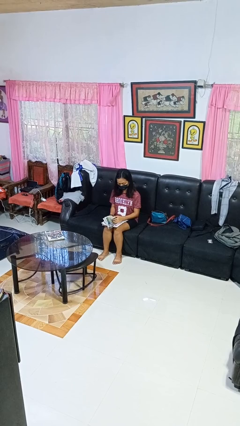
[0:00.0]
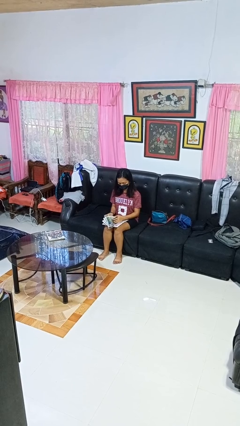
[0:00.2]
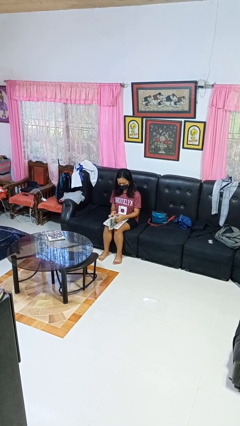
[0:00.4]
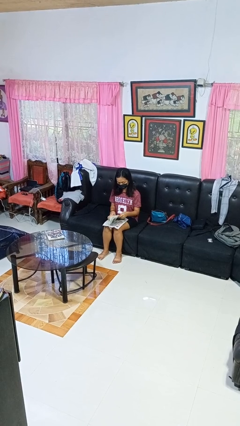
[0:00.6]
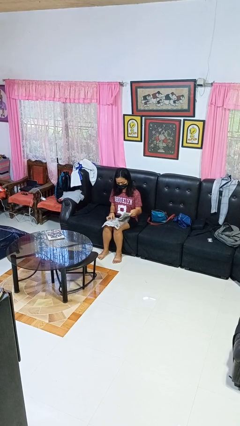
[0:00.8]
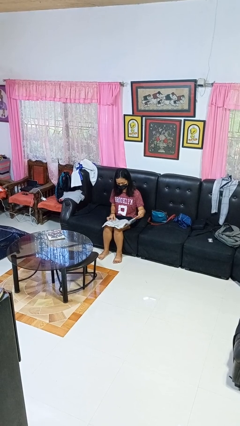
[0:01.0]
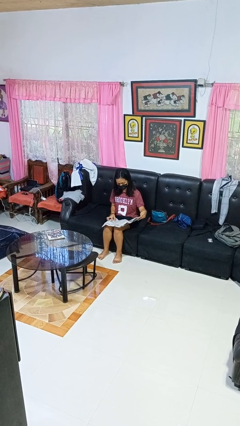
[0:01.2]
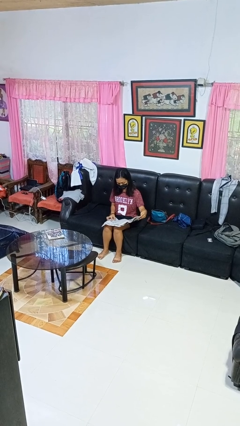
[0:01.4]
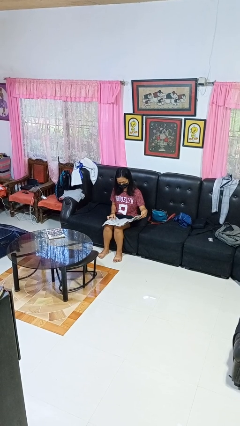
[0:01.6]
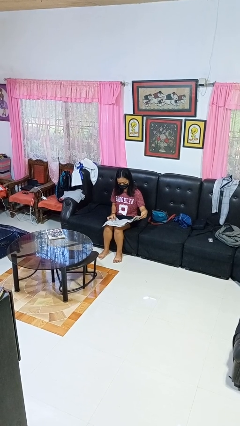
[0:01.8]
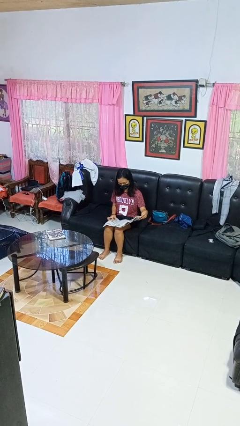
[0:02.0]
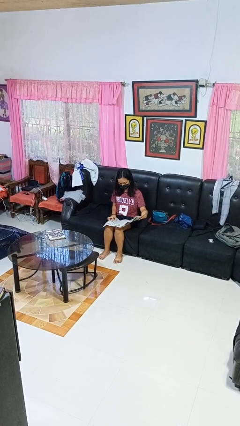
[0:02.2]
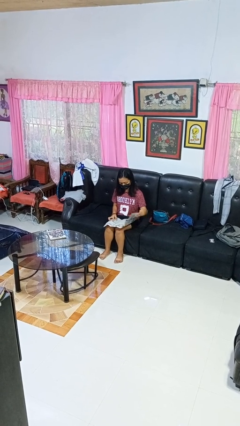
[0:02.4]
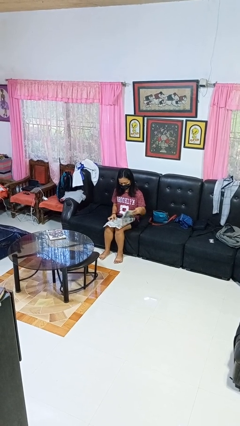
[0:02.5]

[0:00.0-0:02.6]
person reads newspaper

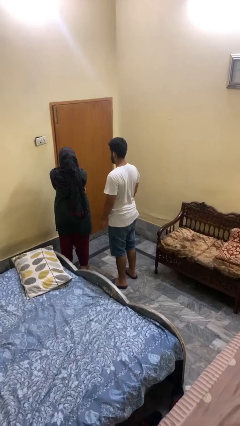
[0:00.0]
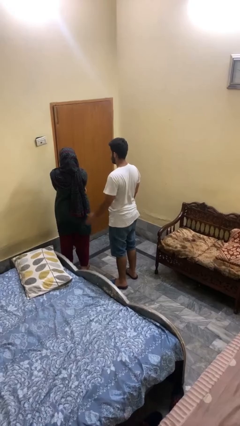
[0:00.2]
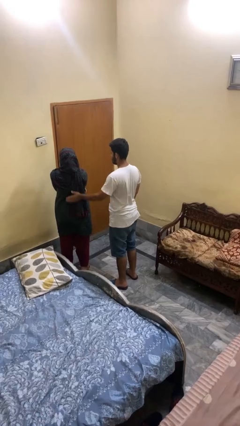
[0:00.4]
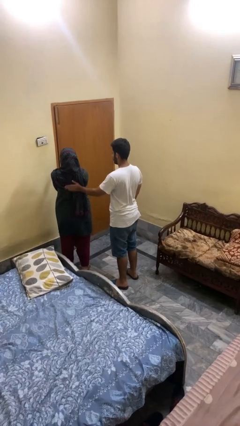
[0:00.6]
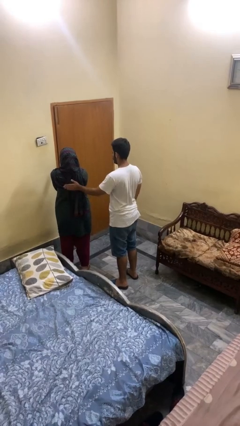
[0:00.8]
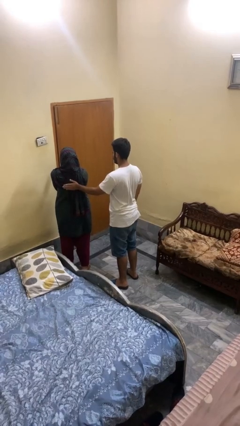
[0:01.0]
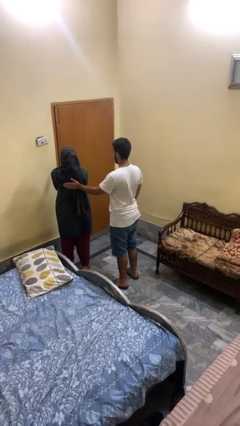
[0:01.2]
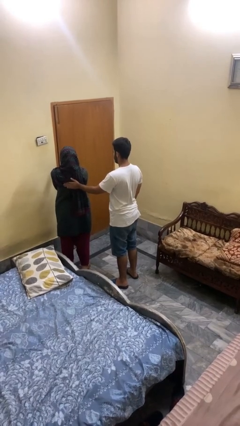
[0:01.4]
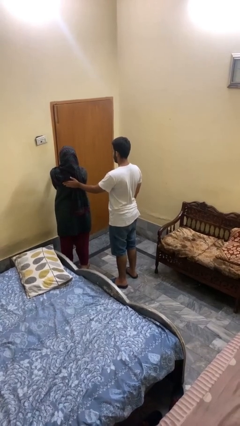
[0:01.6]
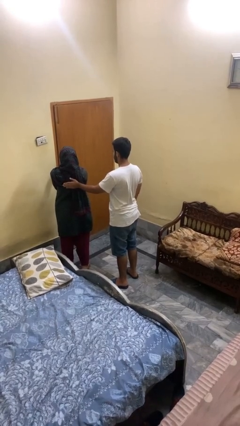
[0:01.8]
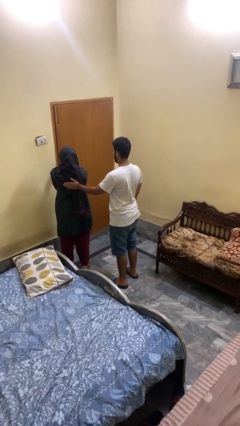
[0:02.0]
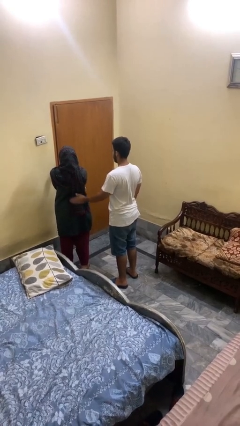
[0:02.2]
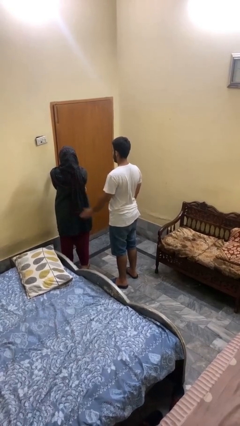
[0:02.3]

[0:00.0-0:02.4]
person touches back of person

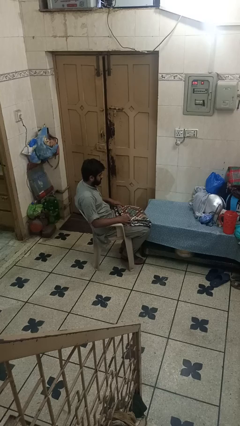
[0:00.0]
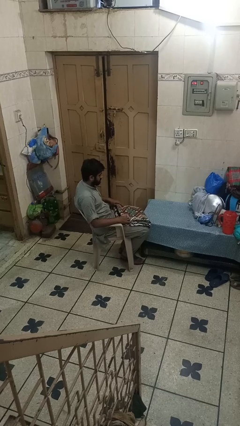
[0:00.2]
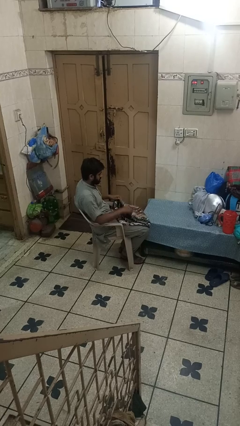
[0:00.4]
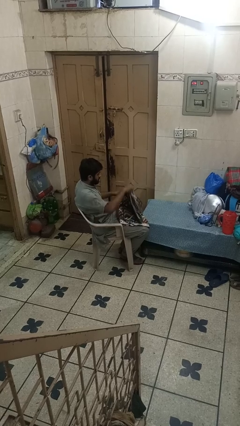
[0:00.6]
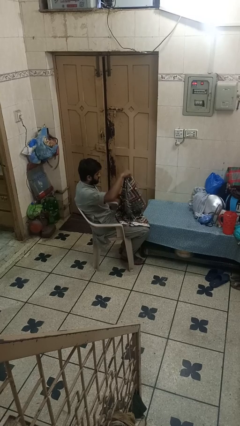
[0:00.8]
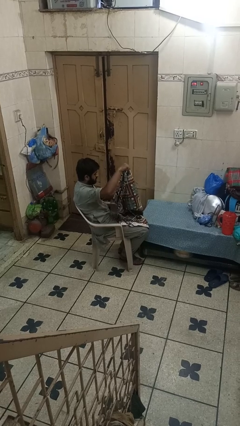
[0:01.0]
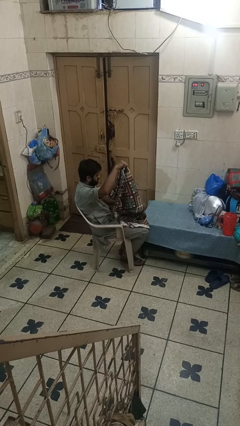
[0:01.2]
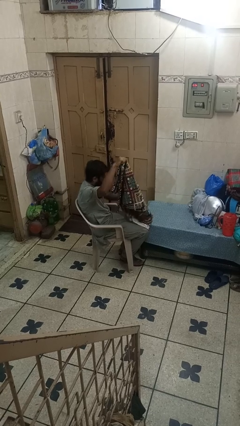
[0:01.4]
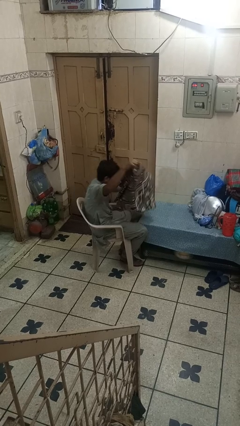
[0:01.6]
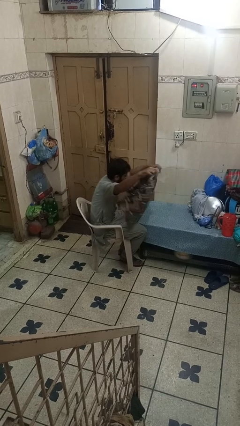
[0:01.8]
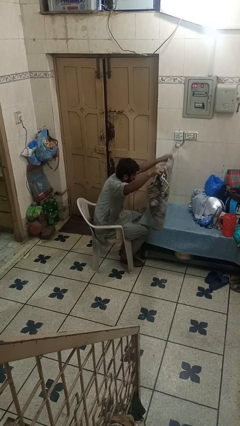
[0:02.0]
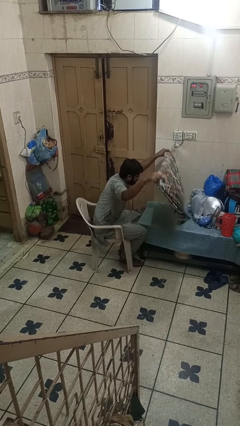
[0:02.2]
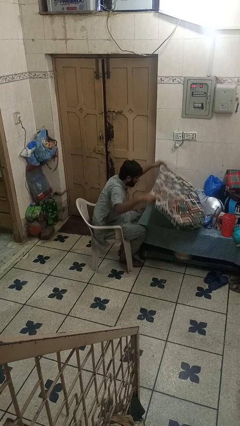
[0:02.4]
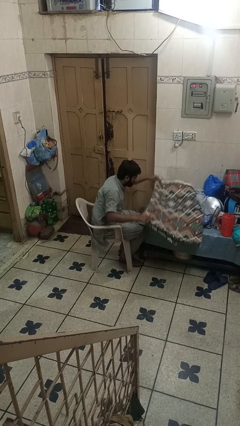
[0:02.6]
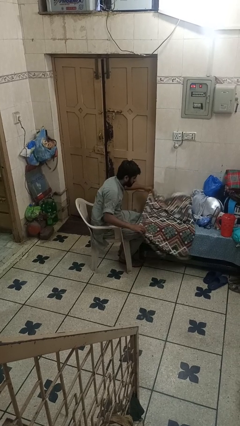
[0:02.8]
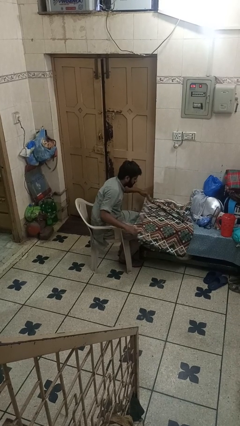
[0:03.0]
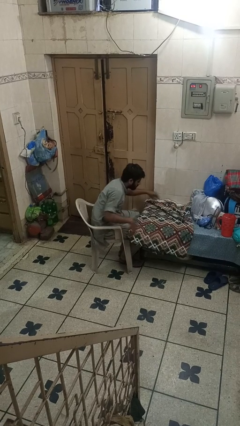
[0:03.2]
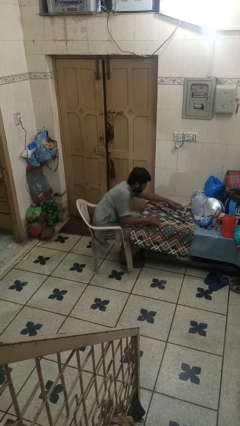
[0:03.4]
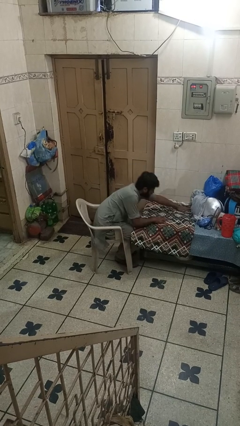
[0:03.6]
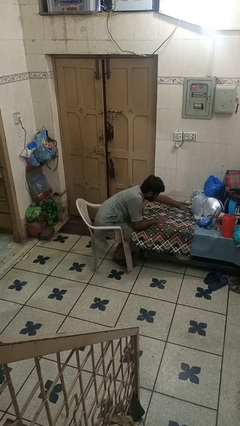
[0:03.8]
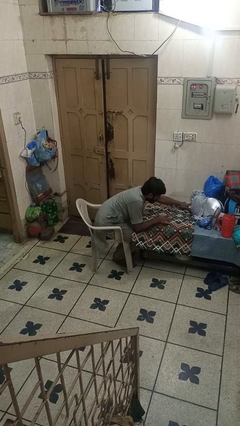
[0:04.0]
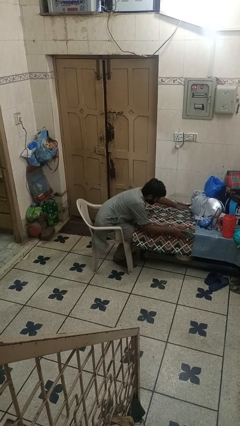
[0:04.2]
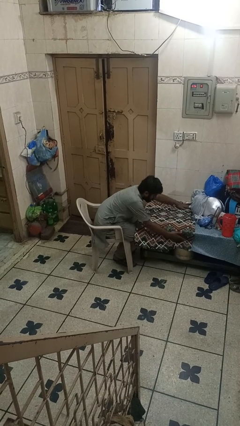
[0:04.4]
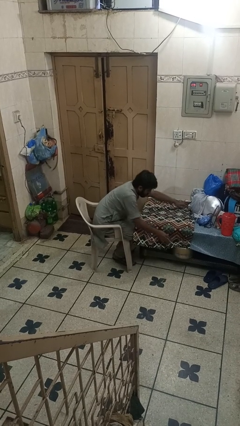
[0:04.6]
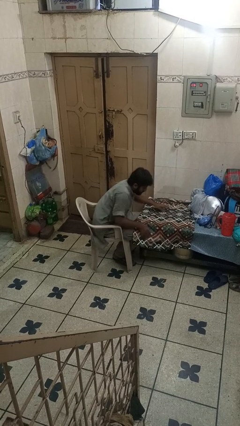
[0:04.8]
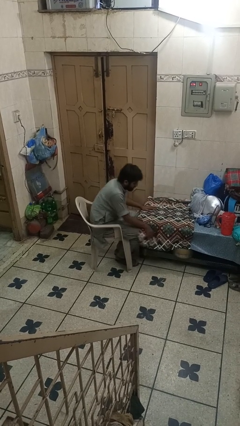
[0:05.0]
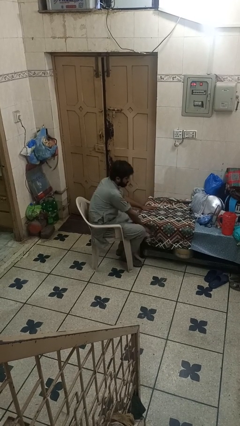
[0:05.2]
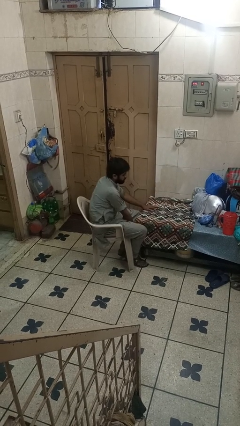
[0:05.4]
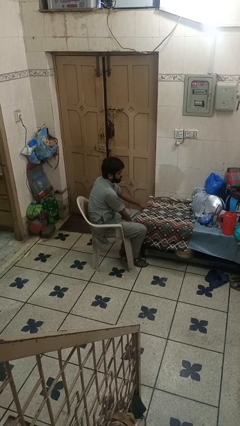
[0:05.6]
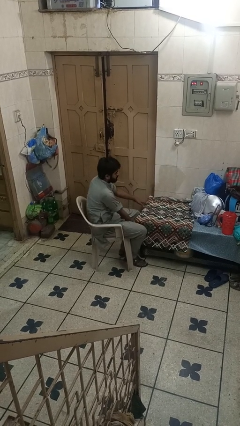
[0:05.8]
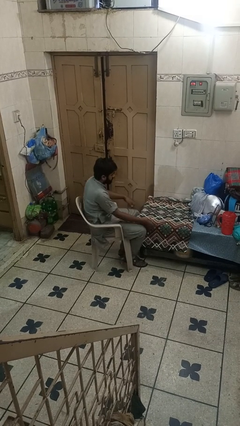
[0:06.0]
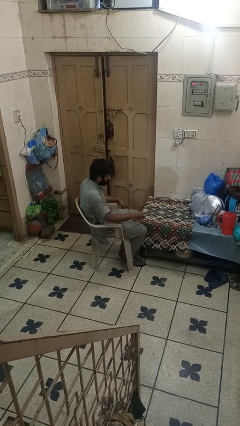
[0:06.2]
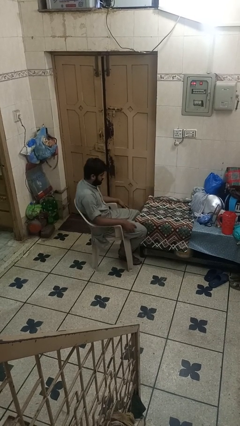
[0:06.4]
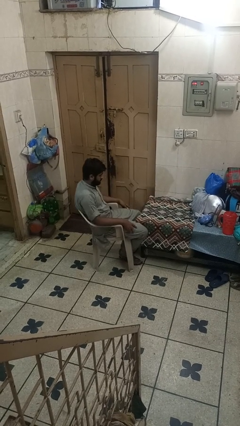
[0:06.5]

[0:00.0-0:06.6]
person spreads tablecloth

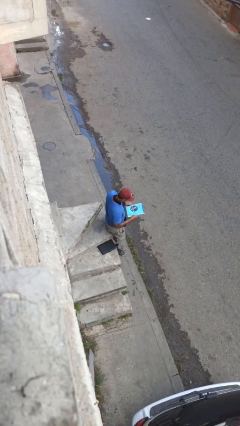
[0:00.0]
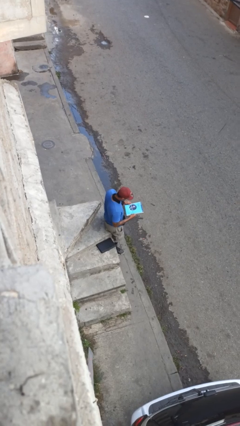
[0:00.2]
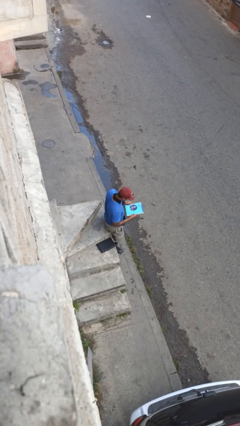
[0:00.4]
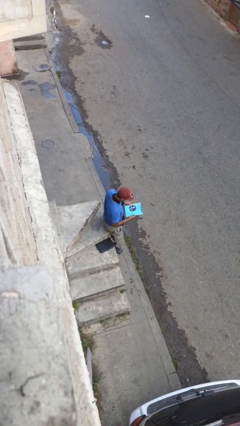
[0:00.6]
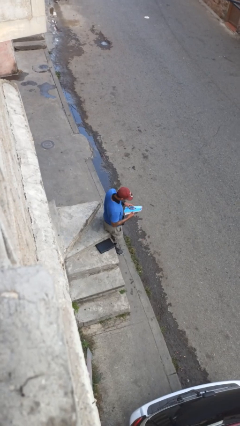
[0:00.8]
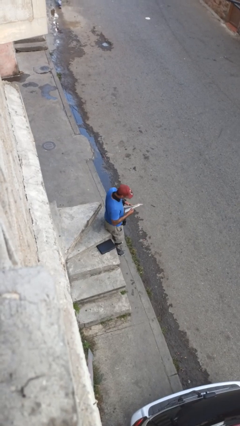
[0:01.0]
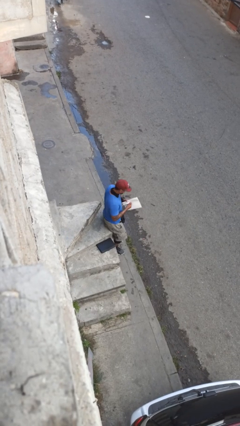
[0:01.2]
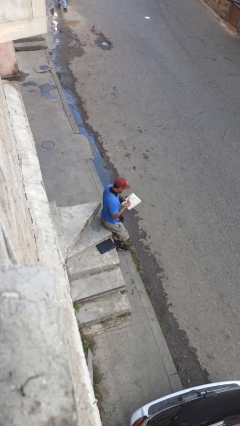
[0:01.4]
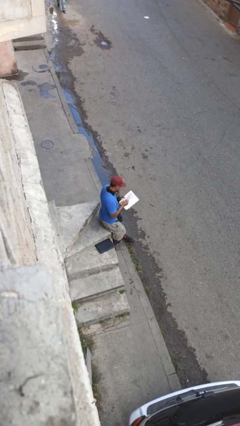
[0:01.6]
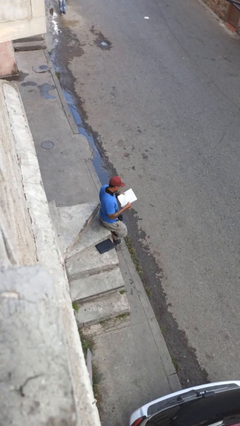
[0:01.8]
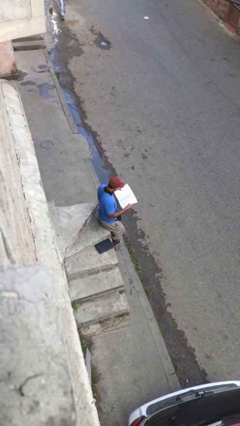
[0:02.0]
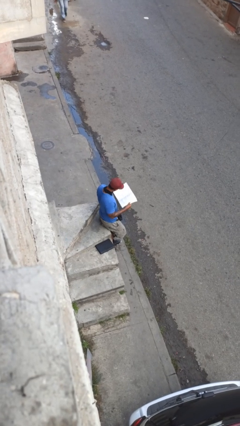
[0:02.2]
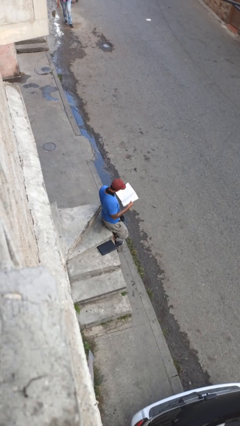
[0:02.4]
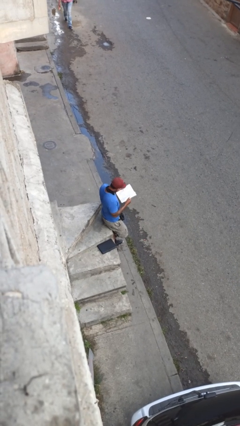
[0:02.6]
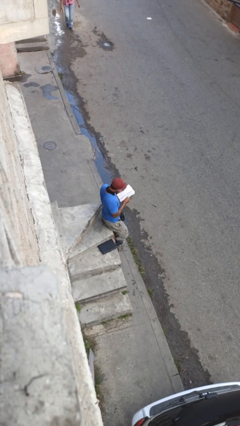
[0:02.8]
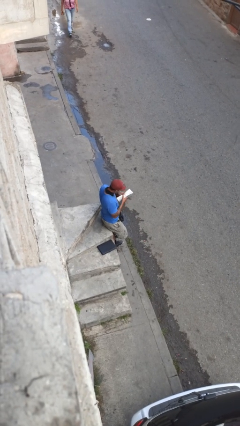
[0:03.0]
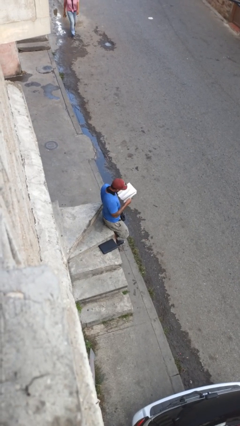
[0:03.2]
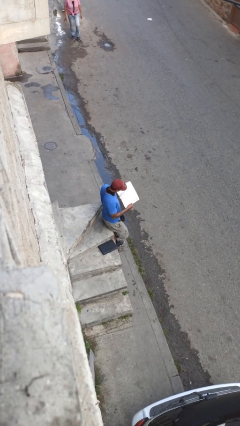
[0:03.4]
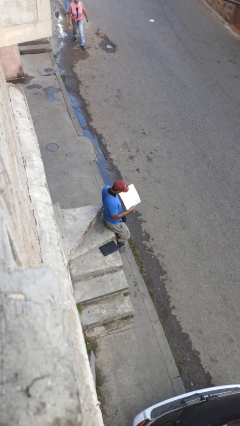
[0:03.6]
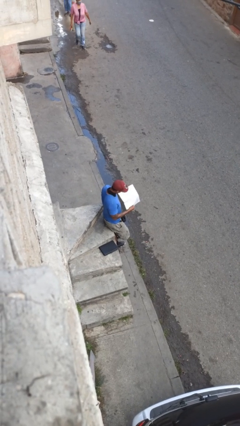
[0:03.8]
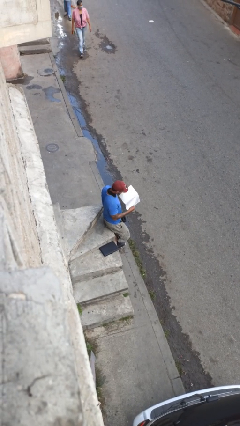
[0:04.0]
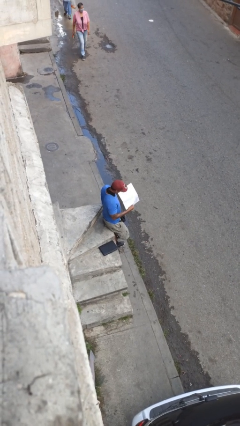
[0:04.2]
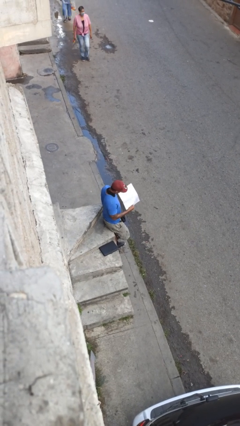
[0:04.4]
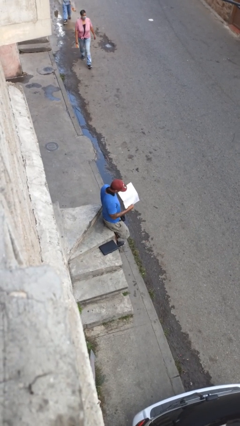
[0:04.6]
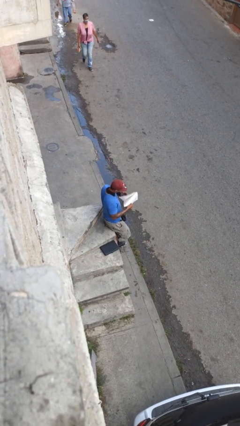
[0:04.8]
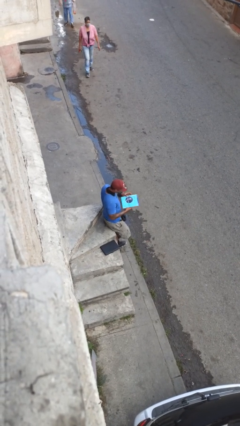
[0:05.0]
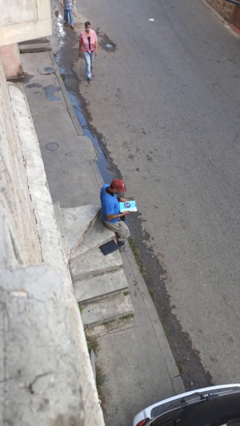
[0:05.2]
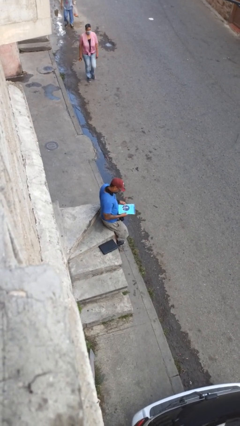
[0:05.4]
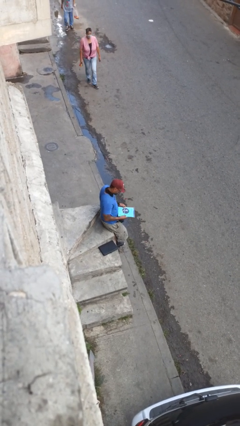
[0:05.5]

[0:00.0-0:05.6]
person reads document

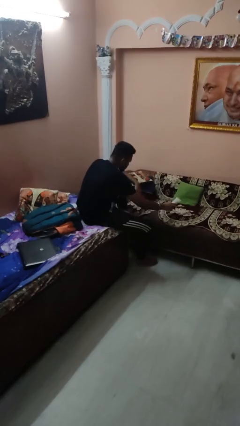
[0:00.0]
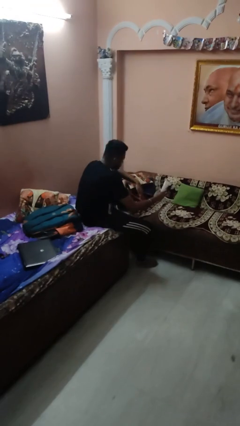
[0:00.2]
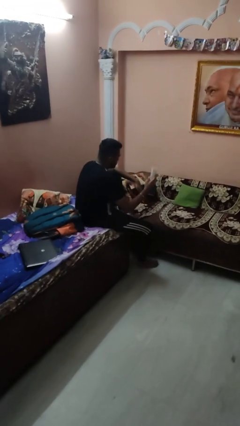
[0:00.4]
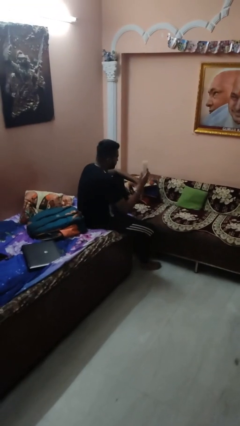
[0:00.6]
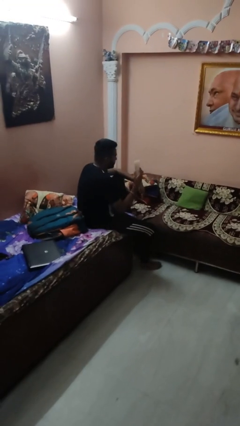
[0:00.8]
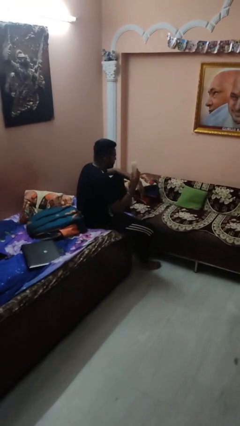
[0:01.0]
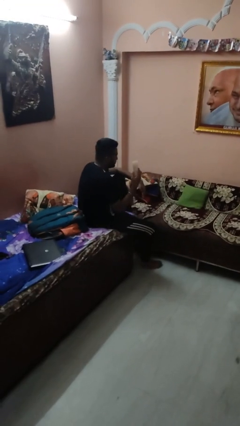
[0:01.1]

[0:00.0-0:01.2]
person picks up object from couch
